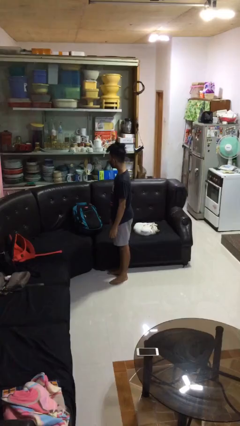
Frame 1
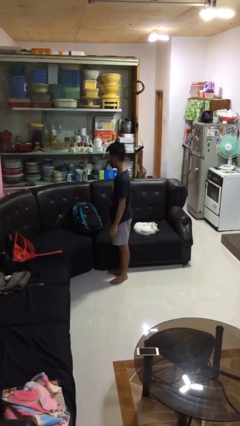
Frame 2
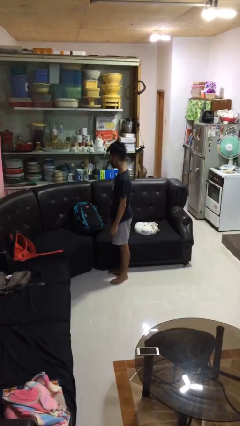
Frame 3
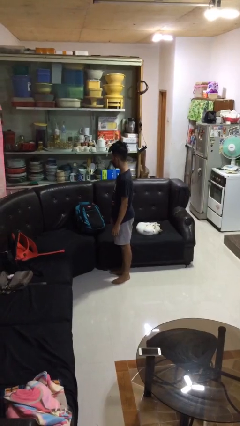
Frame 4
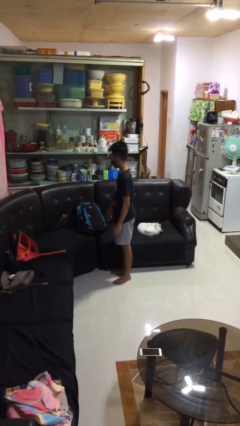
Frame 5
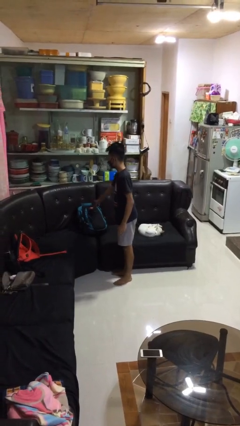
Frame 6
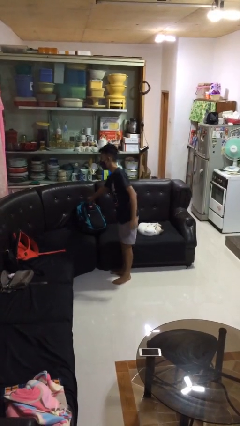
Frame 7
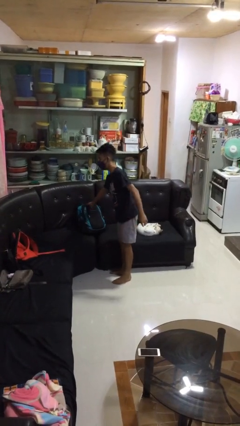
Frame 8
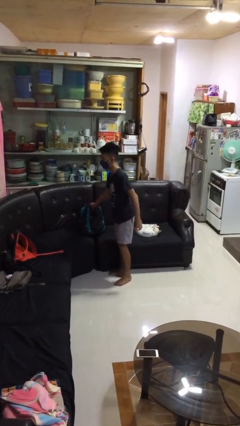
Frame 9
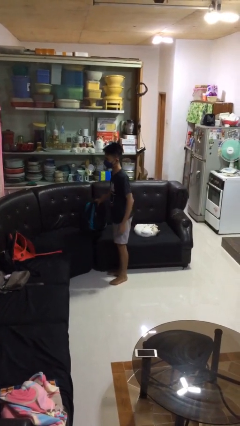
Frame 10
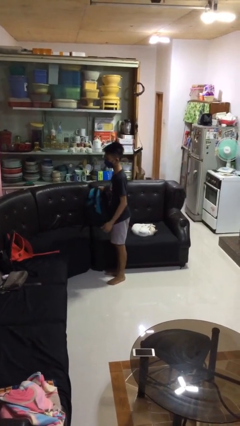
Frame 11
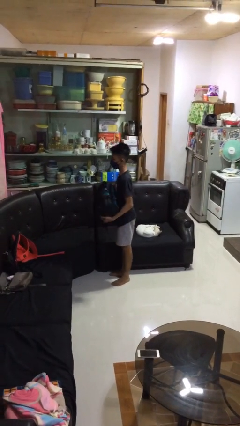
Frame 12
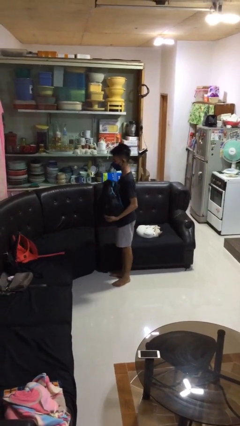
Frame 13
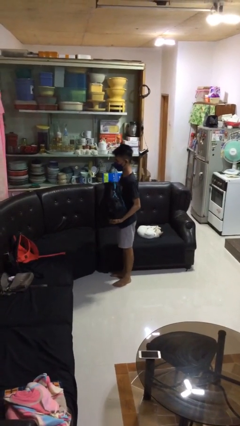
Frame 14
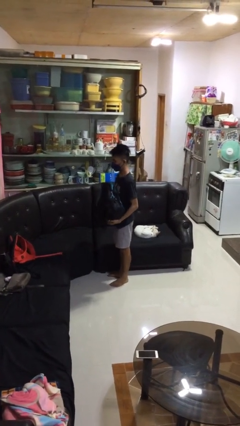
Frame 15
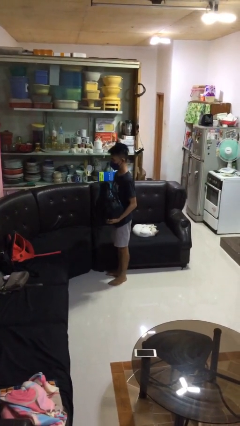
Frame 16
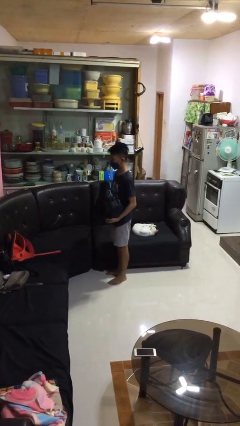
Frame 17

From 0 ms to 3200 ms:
person picks up object from couch

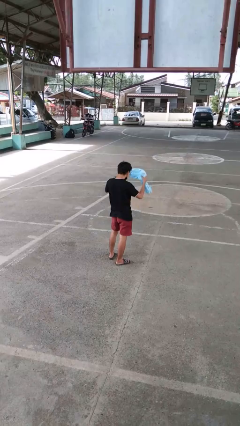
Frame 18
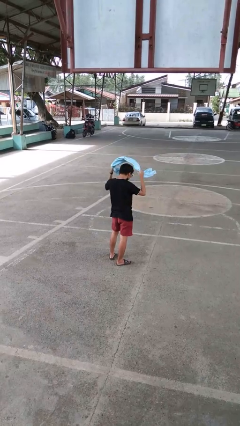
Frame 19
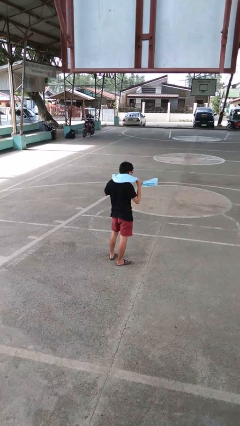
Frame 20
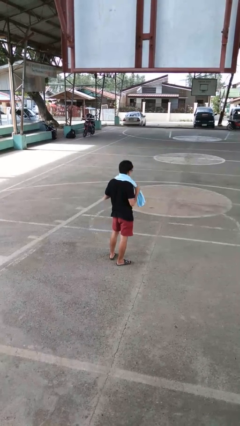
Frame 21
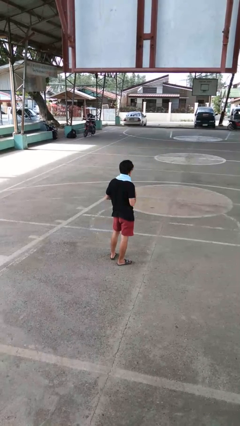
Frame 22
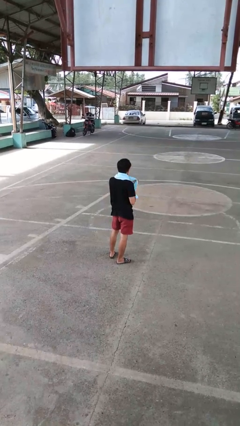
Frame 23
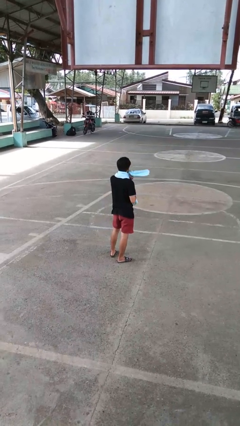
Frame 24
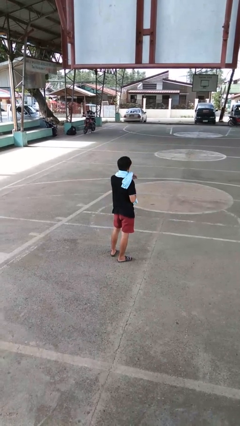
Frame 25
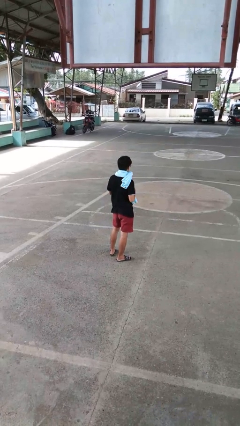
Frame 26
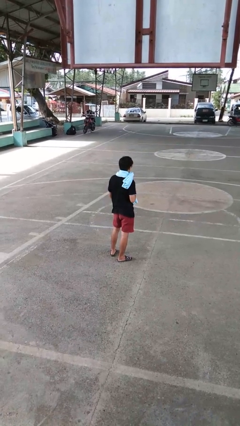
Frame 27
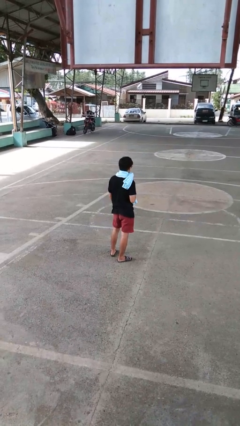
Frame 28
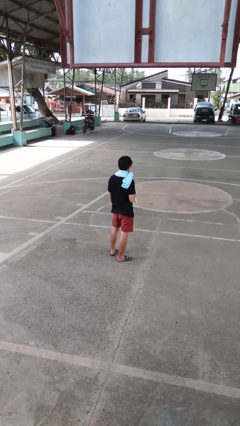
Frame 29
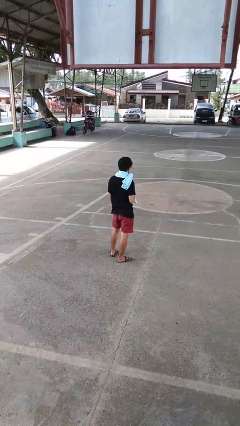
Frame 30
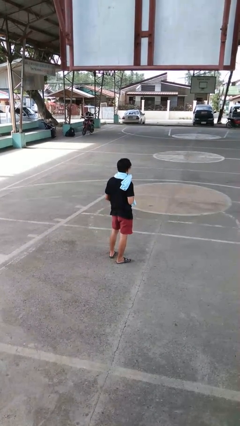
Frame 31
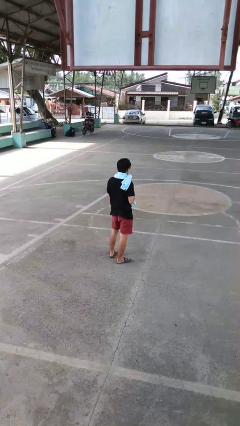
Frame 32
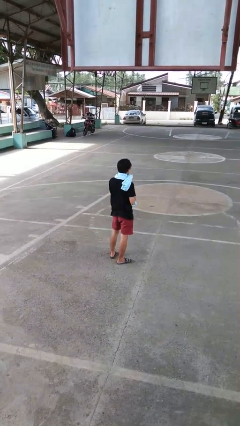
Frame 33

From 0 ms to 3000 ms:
person puts on scarf

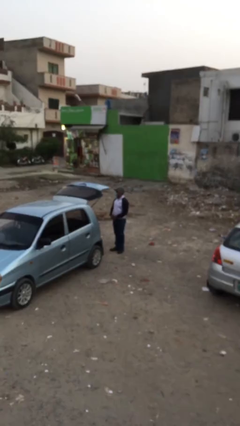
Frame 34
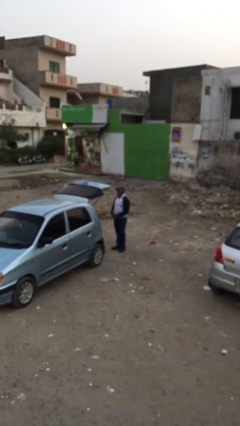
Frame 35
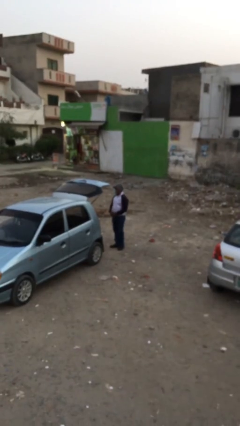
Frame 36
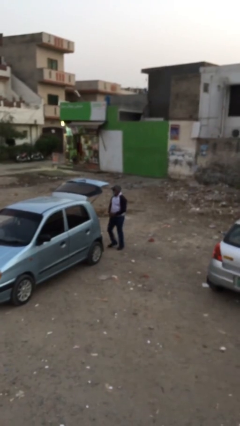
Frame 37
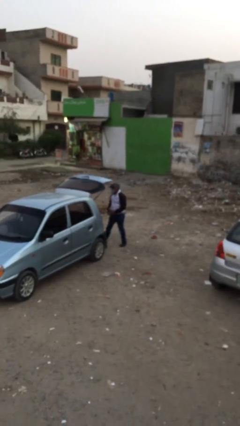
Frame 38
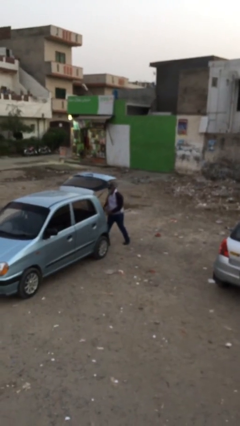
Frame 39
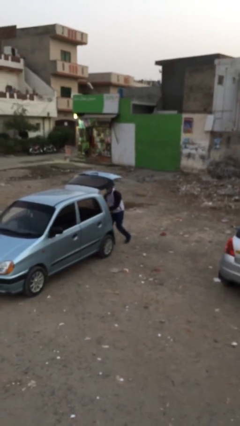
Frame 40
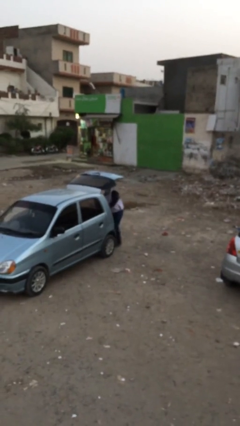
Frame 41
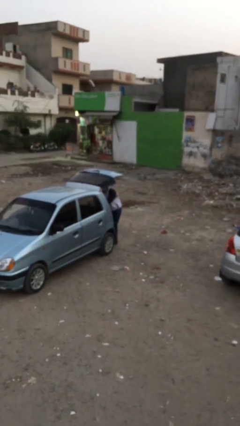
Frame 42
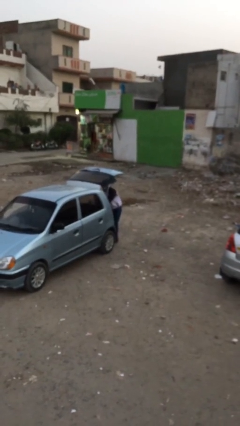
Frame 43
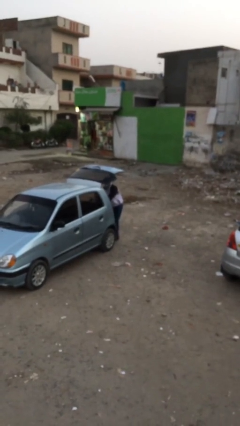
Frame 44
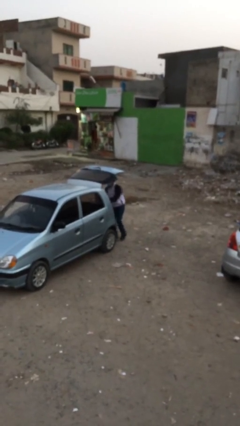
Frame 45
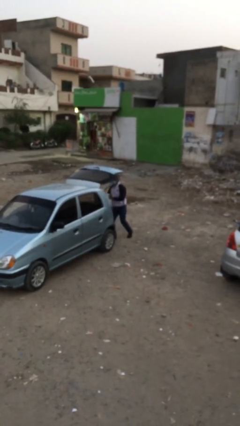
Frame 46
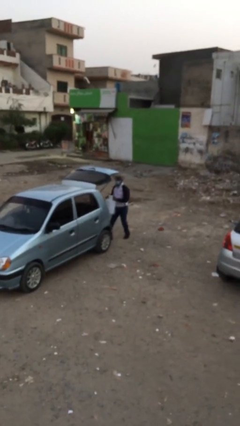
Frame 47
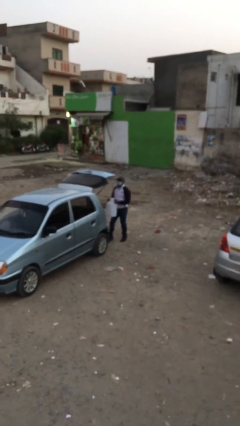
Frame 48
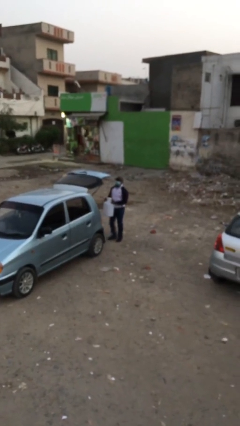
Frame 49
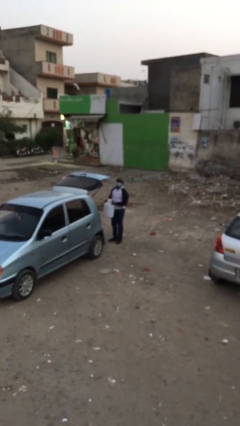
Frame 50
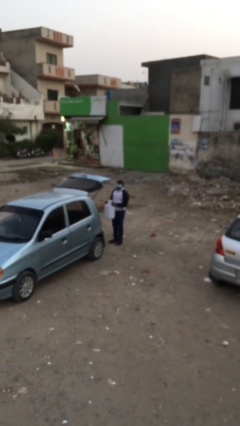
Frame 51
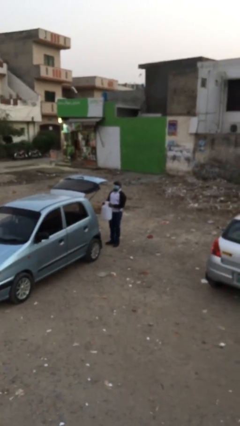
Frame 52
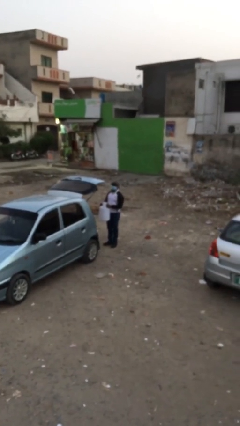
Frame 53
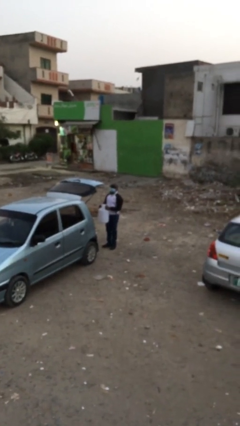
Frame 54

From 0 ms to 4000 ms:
person unloads car

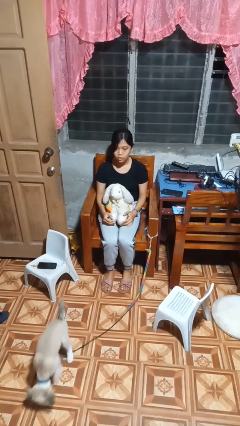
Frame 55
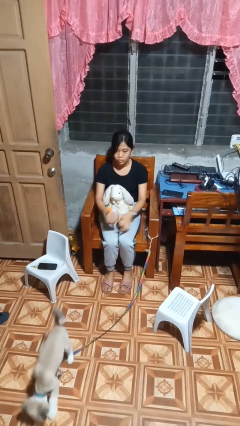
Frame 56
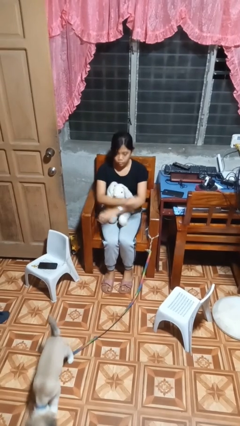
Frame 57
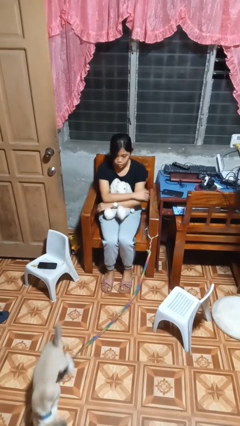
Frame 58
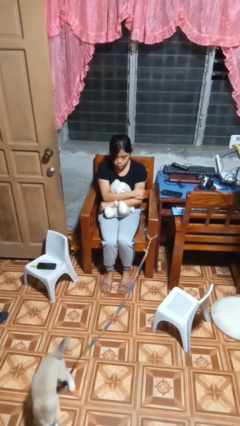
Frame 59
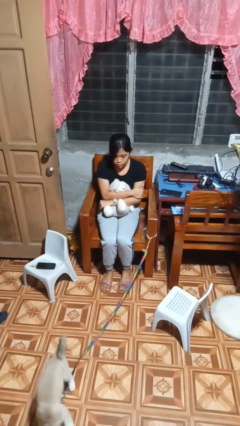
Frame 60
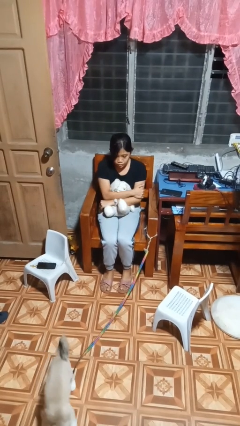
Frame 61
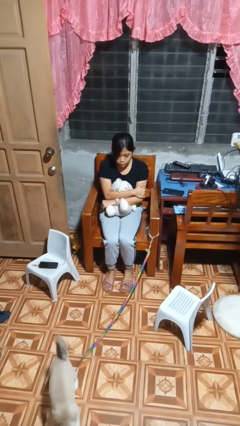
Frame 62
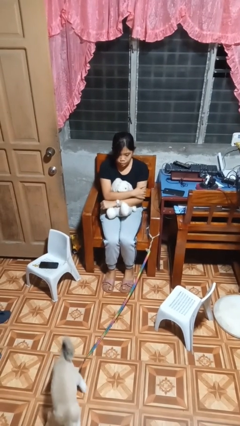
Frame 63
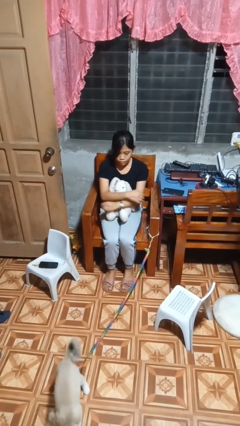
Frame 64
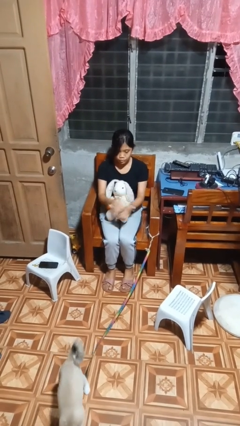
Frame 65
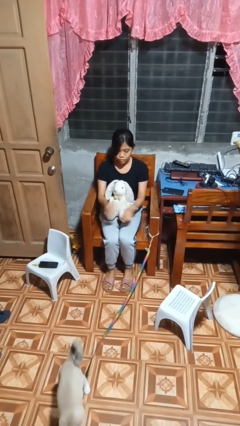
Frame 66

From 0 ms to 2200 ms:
person hugs stuffed animal

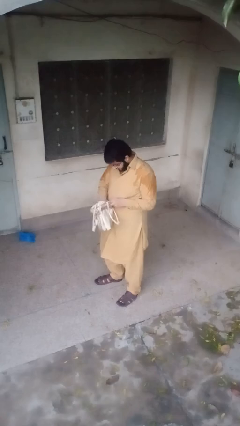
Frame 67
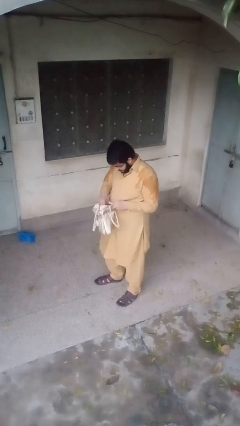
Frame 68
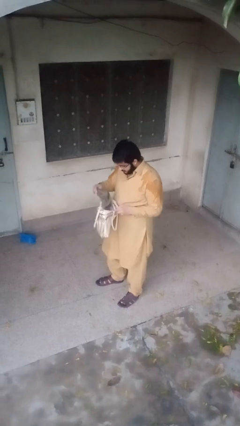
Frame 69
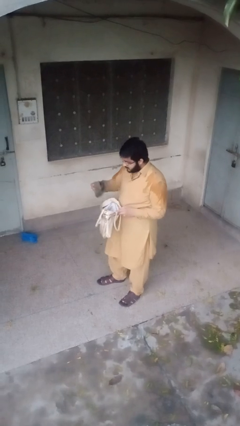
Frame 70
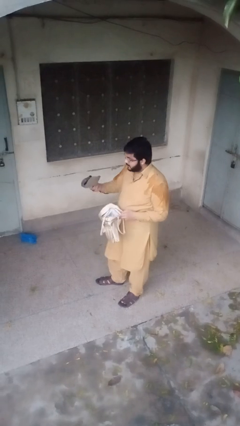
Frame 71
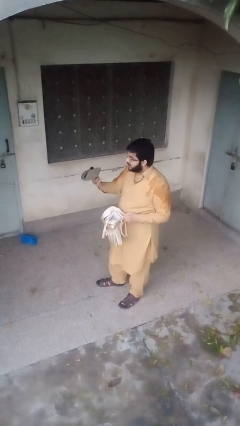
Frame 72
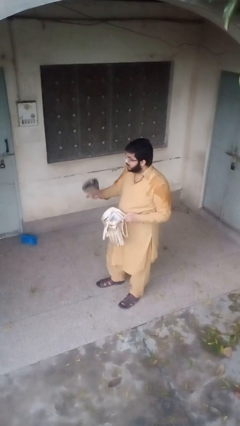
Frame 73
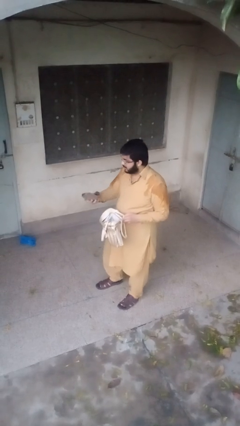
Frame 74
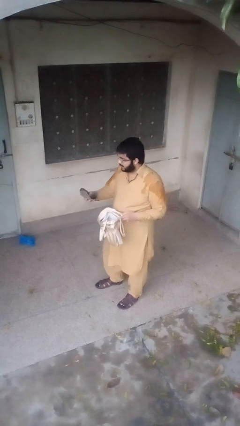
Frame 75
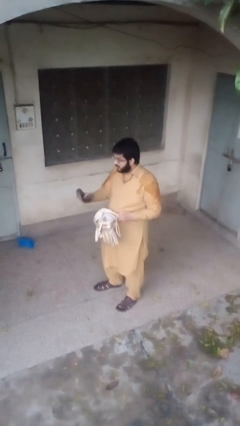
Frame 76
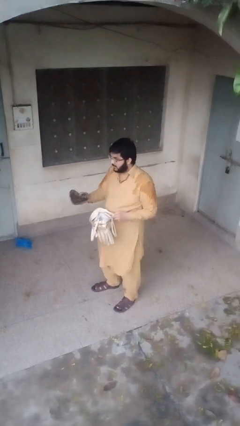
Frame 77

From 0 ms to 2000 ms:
person takes object from purse

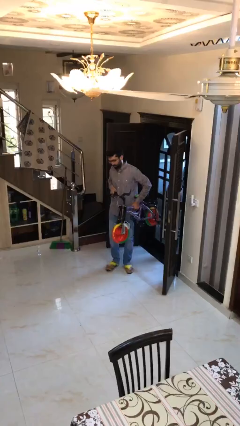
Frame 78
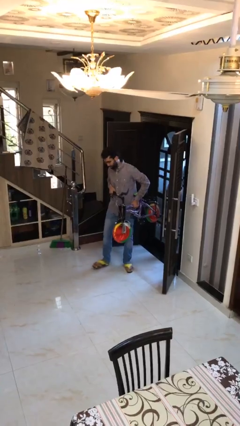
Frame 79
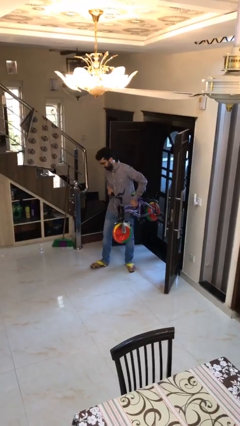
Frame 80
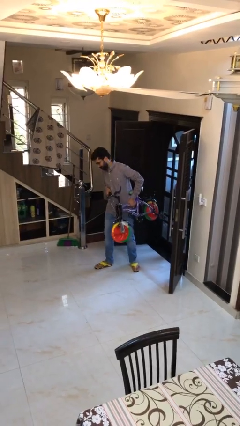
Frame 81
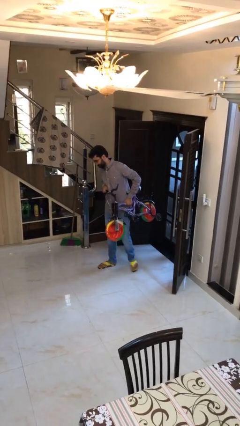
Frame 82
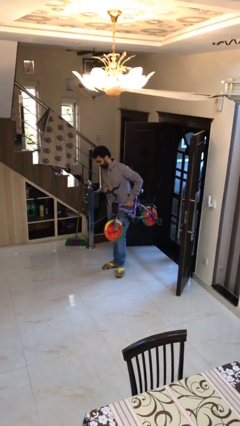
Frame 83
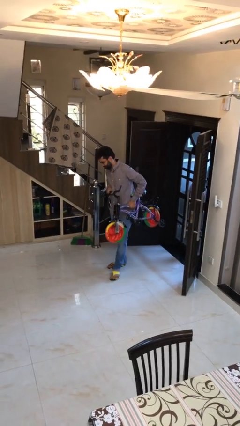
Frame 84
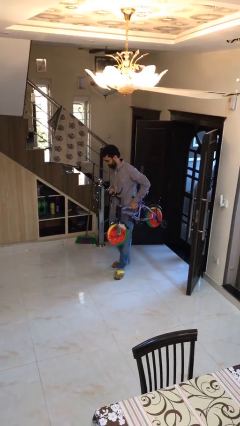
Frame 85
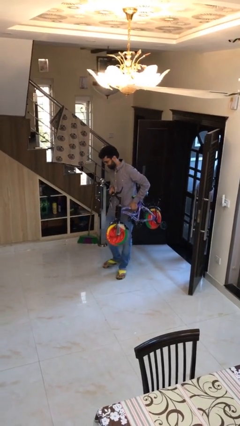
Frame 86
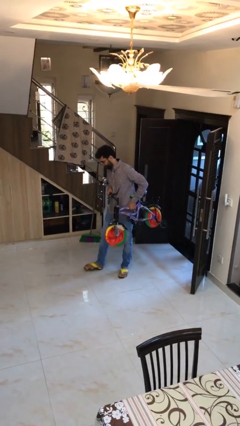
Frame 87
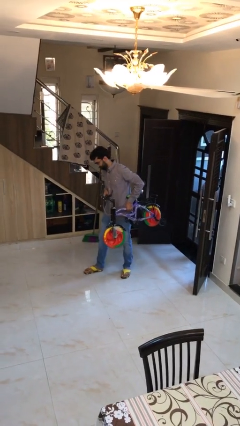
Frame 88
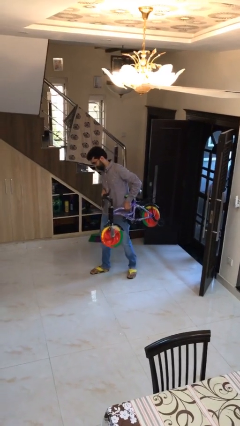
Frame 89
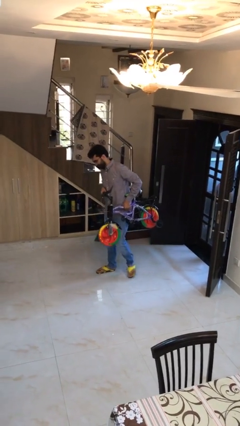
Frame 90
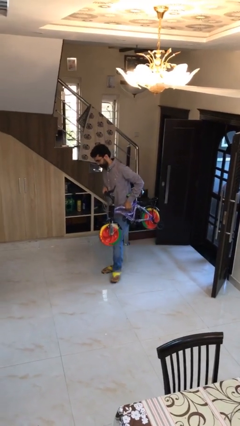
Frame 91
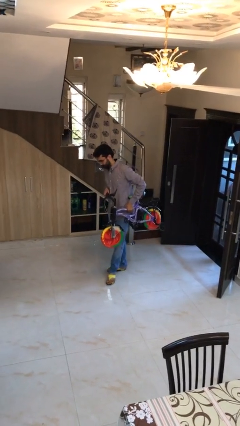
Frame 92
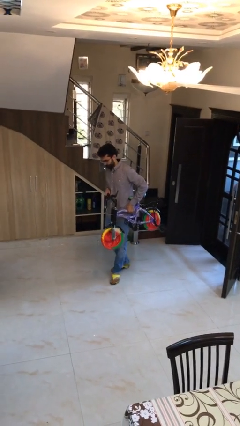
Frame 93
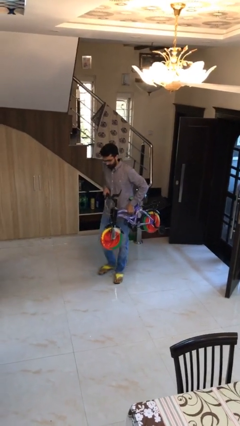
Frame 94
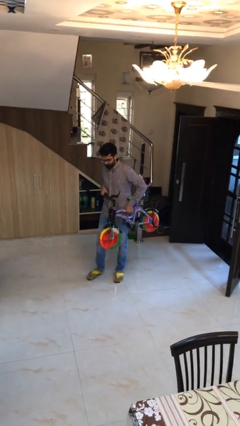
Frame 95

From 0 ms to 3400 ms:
person carries heavy object
